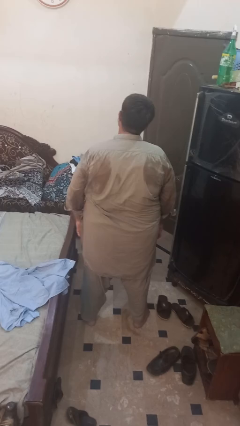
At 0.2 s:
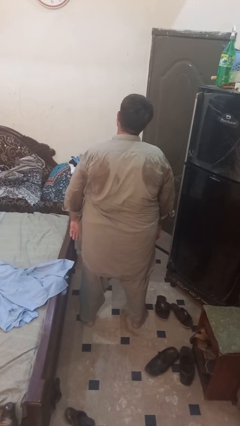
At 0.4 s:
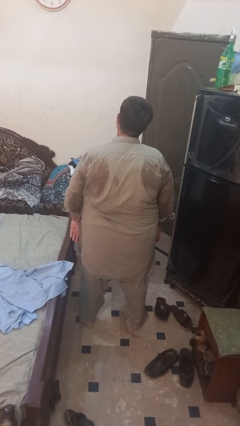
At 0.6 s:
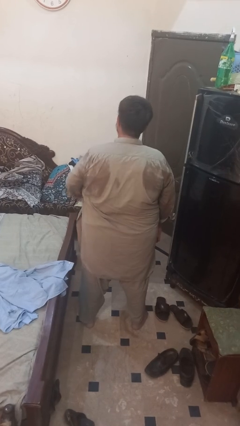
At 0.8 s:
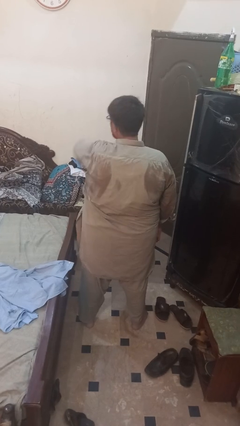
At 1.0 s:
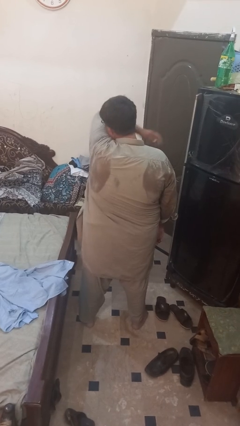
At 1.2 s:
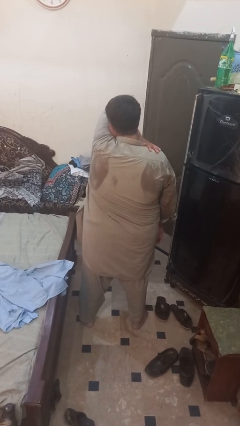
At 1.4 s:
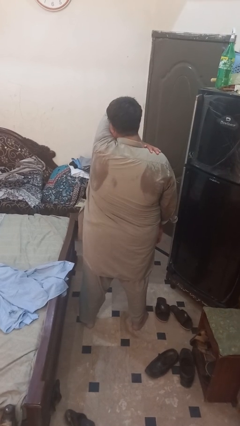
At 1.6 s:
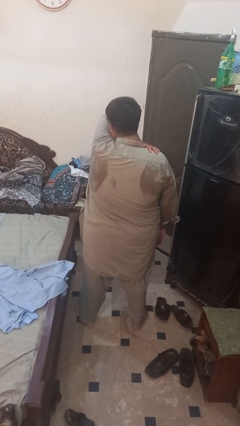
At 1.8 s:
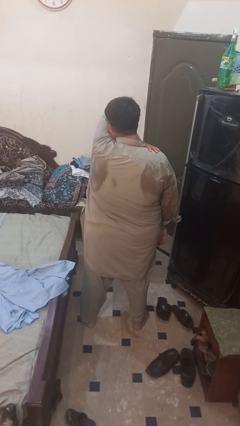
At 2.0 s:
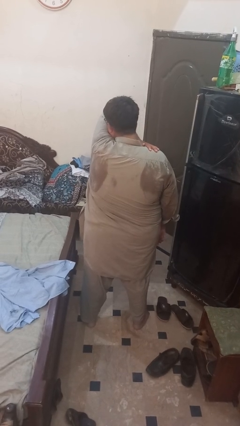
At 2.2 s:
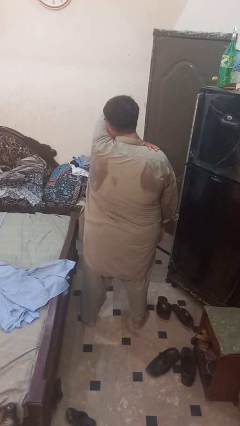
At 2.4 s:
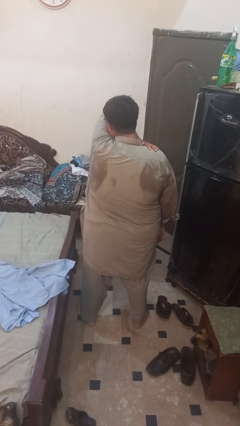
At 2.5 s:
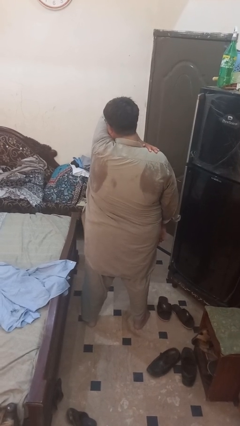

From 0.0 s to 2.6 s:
person sneezes into arm

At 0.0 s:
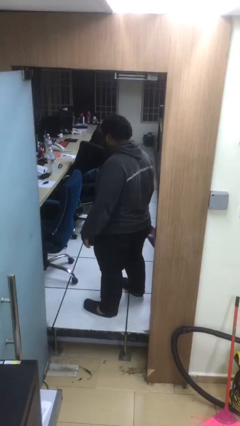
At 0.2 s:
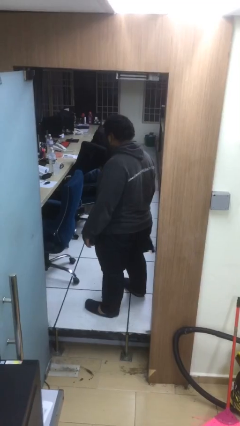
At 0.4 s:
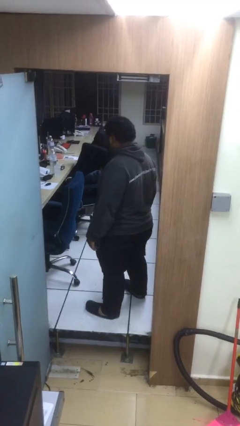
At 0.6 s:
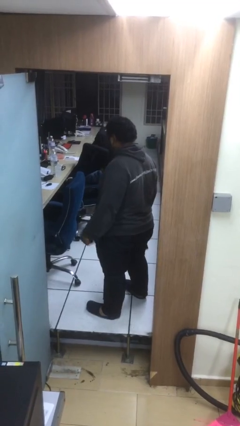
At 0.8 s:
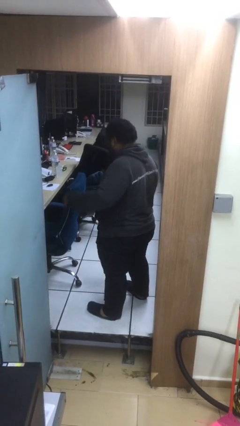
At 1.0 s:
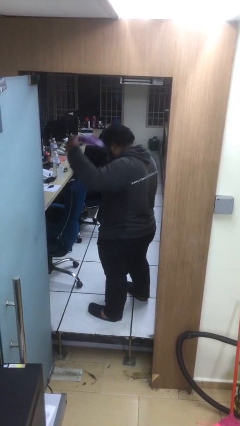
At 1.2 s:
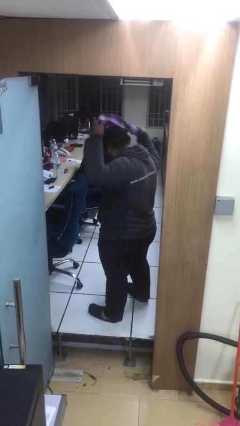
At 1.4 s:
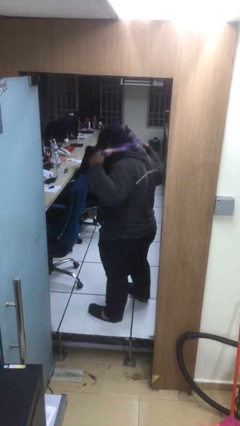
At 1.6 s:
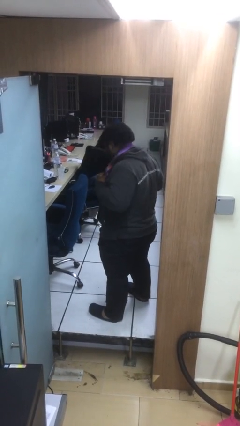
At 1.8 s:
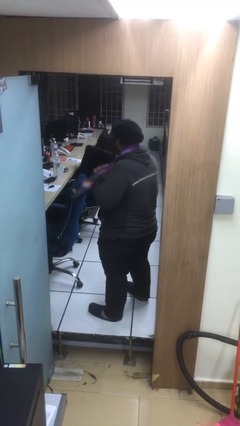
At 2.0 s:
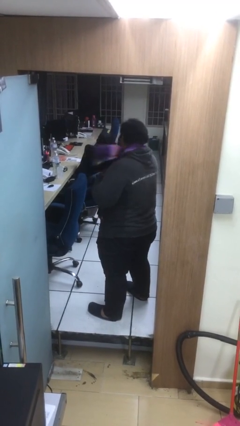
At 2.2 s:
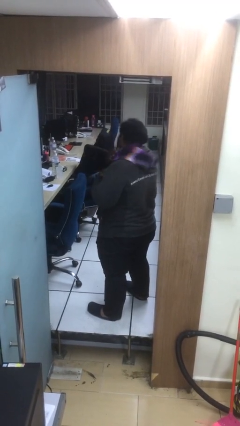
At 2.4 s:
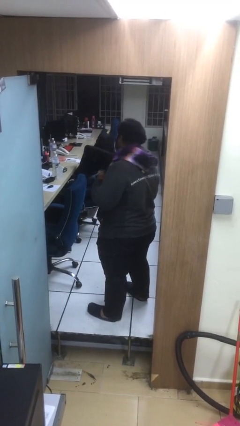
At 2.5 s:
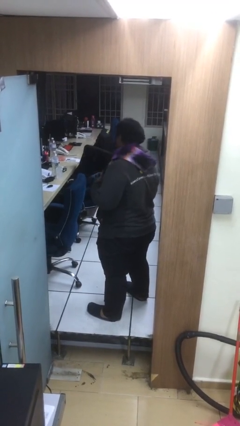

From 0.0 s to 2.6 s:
person puts on scarf

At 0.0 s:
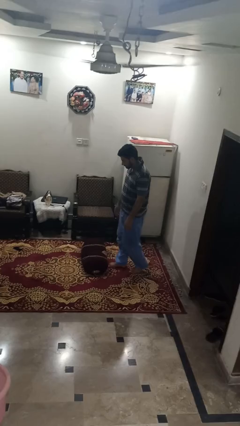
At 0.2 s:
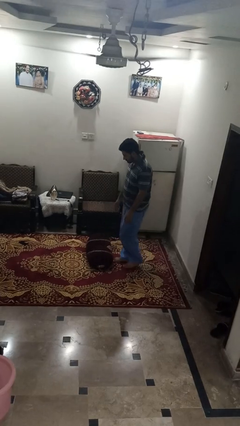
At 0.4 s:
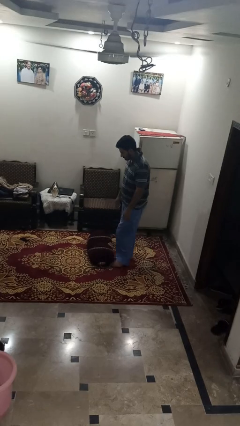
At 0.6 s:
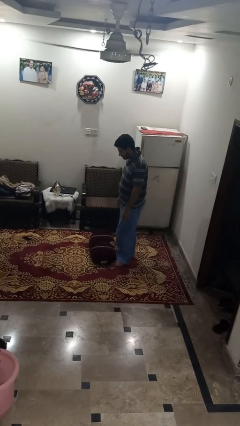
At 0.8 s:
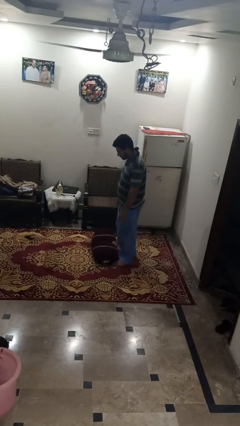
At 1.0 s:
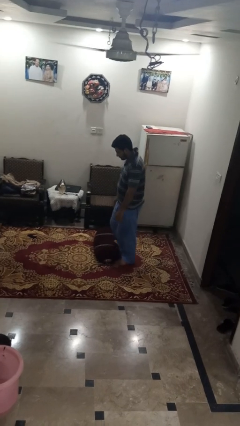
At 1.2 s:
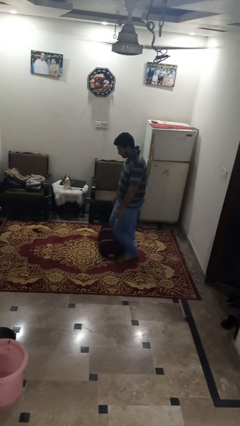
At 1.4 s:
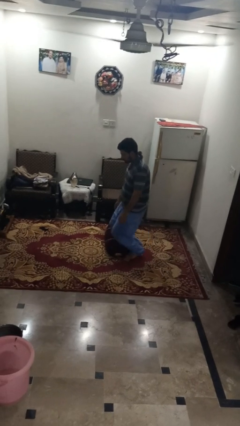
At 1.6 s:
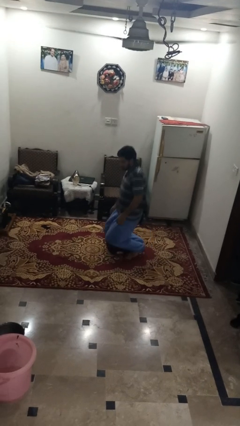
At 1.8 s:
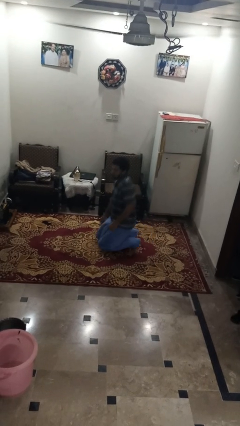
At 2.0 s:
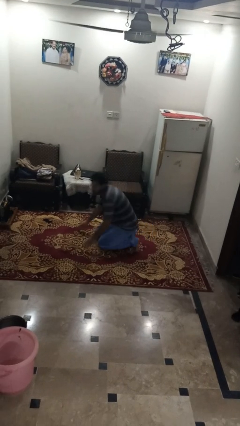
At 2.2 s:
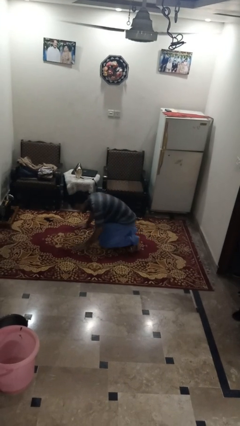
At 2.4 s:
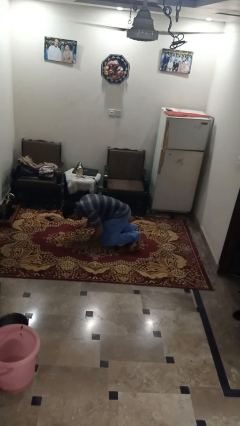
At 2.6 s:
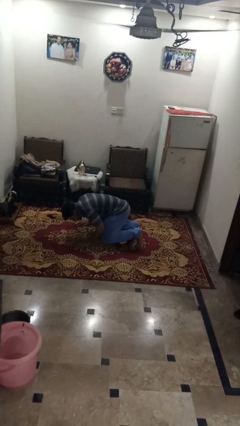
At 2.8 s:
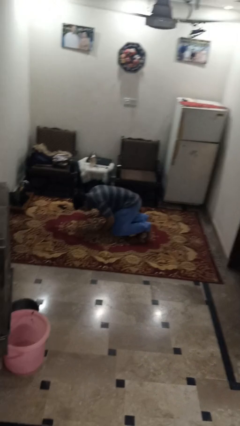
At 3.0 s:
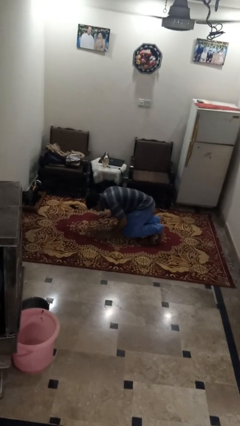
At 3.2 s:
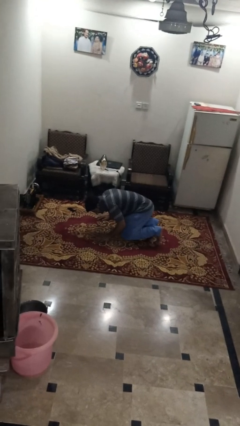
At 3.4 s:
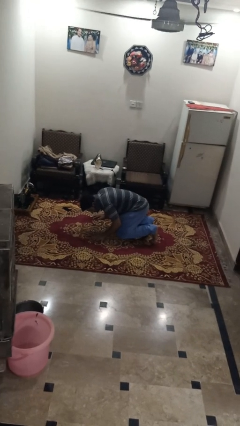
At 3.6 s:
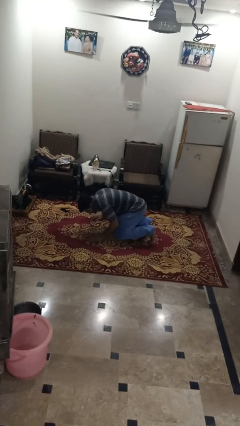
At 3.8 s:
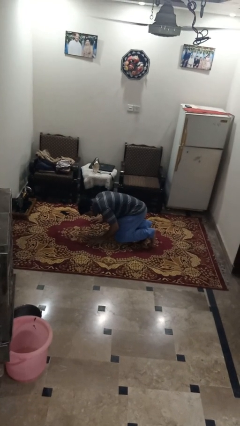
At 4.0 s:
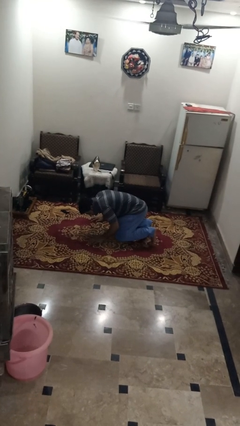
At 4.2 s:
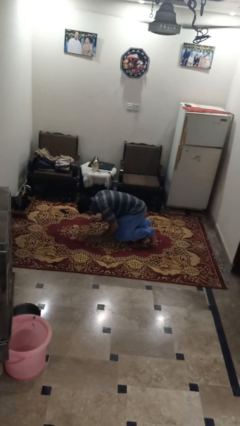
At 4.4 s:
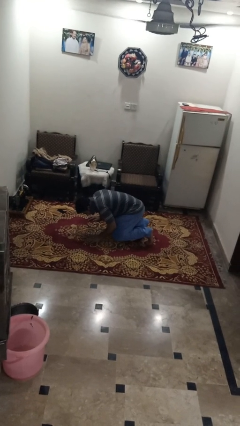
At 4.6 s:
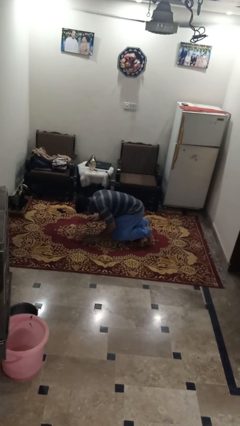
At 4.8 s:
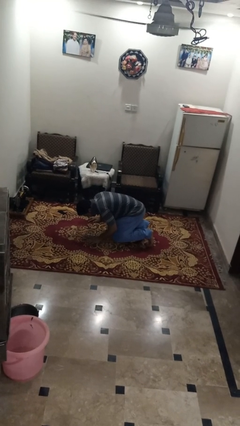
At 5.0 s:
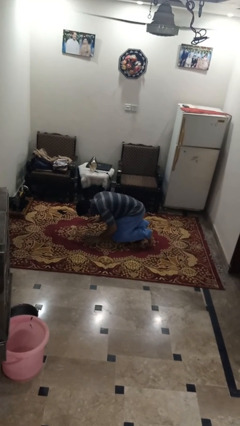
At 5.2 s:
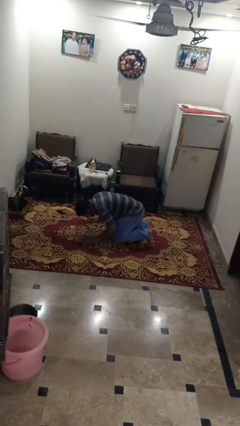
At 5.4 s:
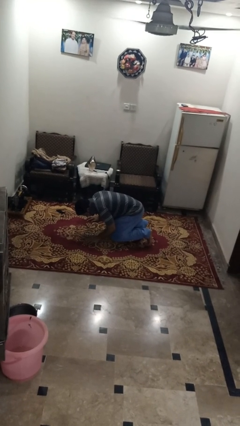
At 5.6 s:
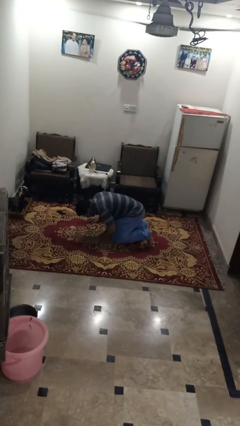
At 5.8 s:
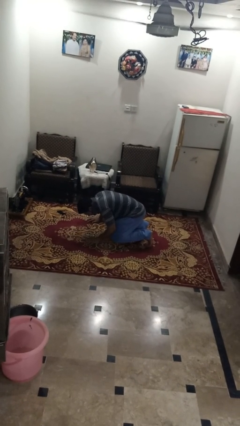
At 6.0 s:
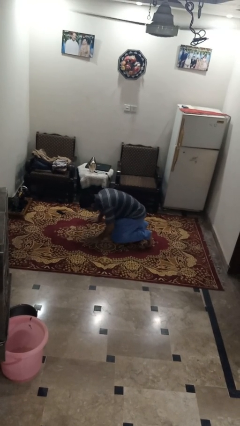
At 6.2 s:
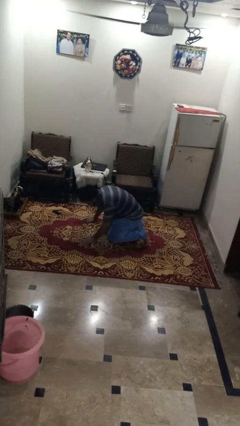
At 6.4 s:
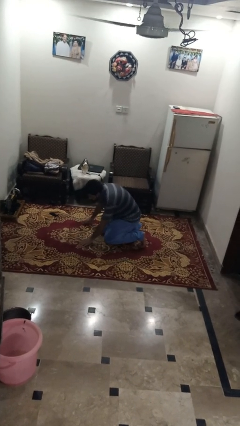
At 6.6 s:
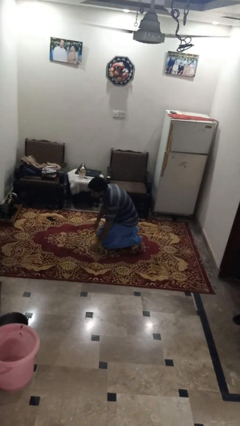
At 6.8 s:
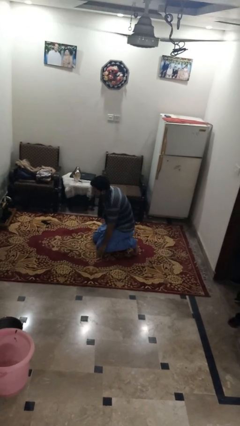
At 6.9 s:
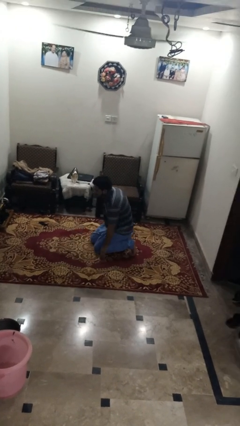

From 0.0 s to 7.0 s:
person trips on object on floor

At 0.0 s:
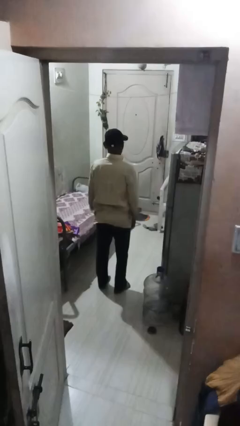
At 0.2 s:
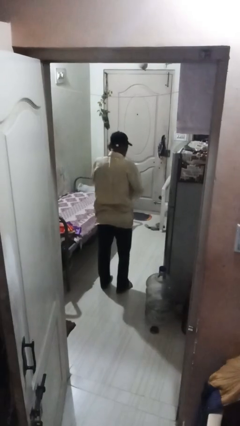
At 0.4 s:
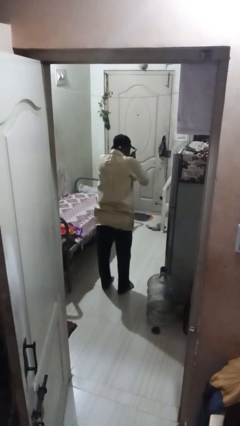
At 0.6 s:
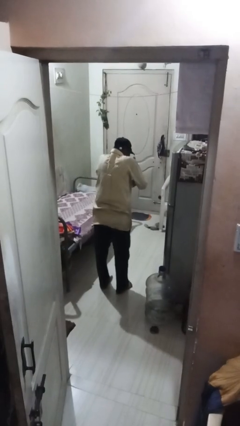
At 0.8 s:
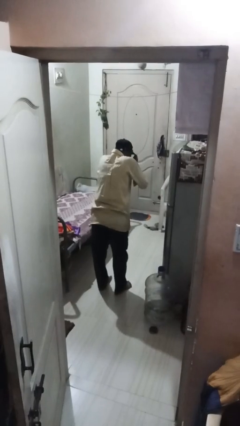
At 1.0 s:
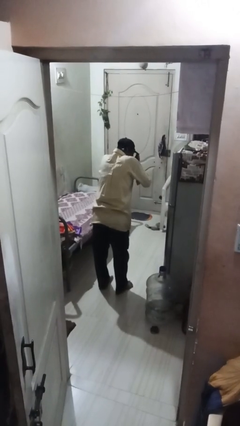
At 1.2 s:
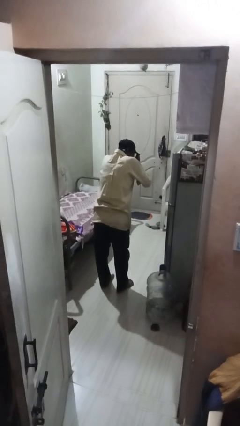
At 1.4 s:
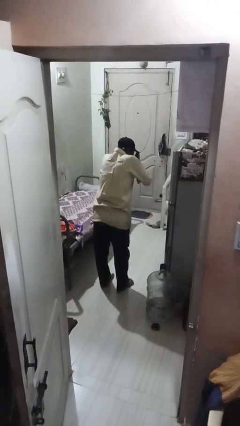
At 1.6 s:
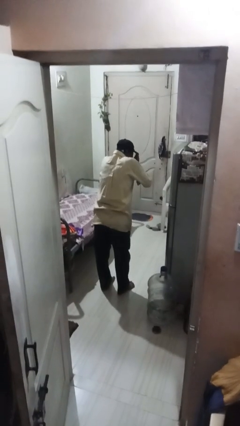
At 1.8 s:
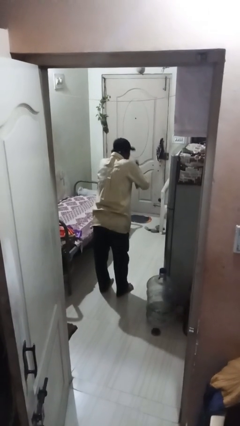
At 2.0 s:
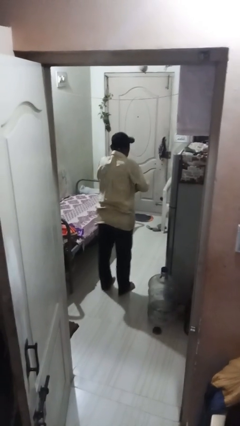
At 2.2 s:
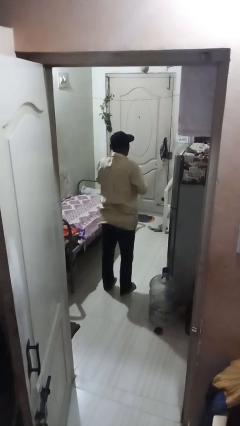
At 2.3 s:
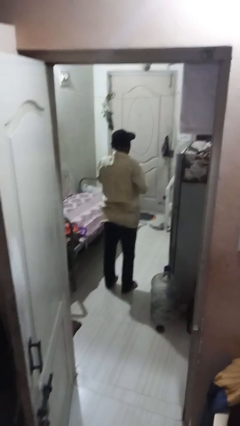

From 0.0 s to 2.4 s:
person prays

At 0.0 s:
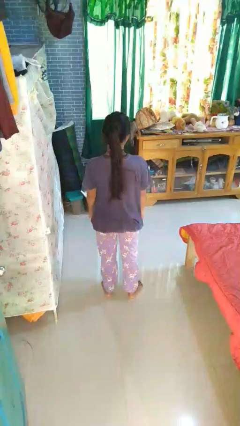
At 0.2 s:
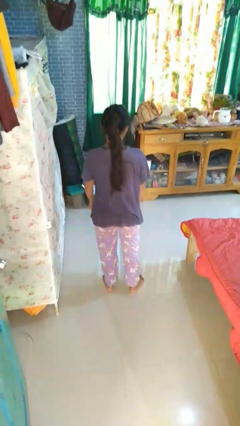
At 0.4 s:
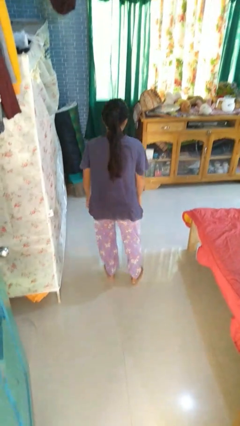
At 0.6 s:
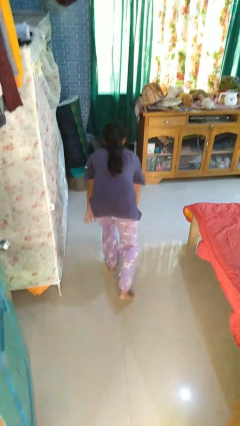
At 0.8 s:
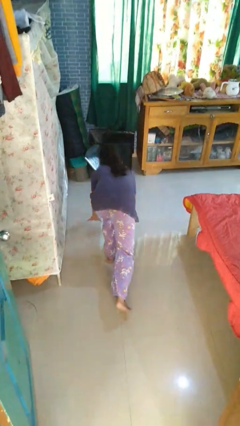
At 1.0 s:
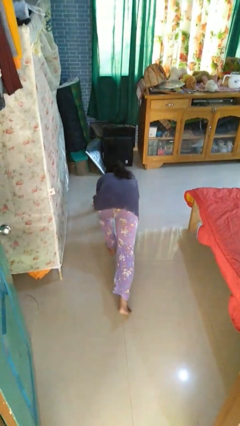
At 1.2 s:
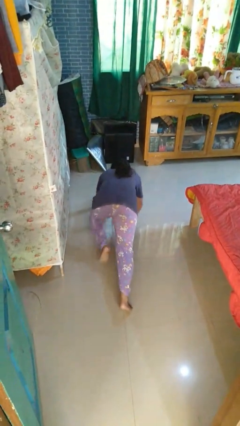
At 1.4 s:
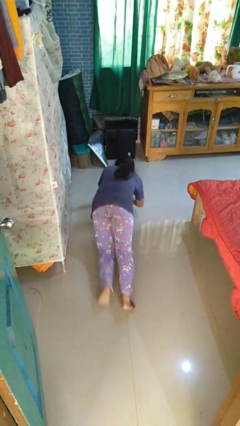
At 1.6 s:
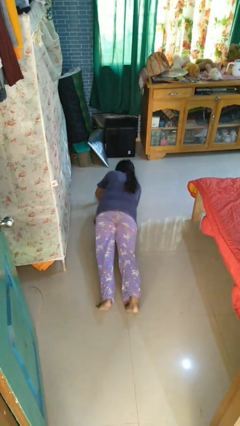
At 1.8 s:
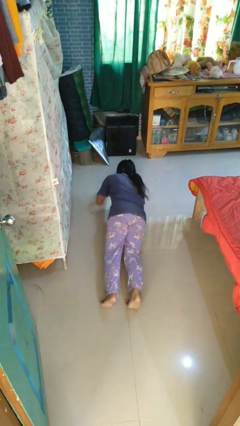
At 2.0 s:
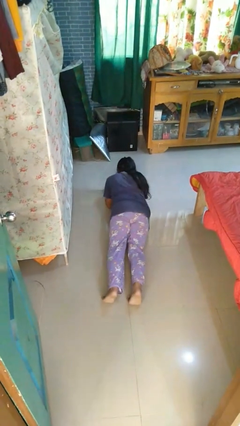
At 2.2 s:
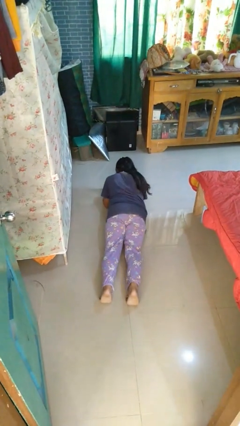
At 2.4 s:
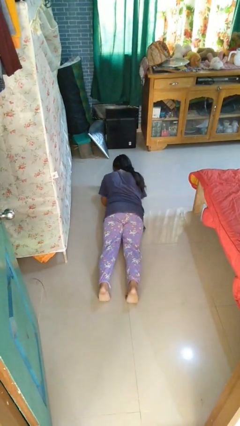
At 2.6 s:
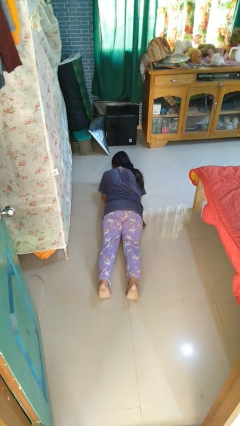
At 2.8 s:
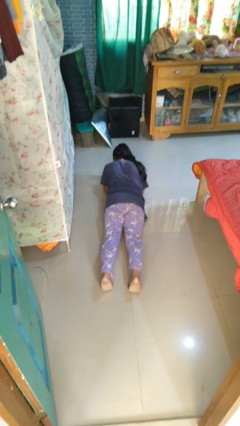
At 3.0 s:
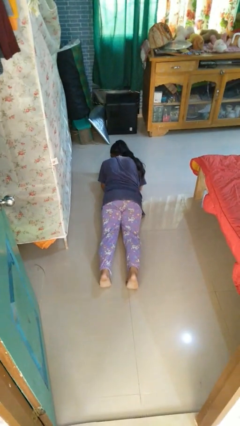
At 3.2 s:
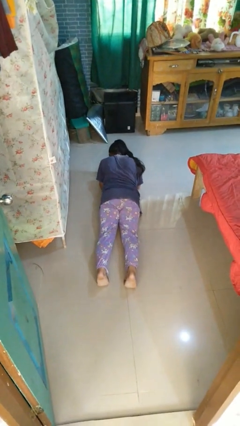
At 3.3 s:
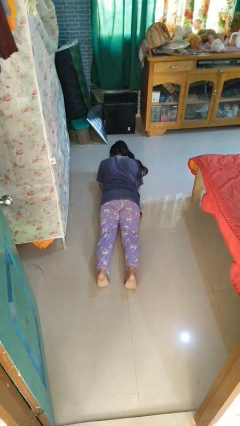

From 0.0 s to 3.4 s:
person exercises with plank
